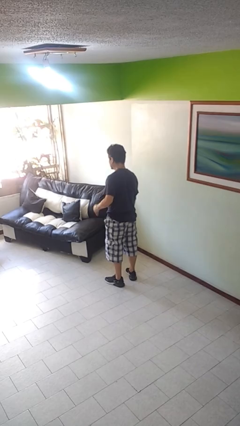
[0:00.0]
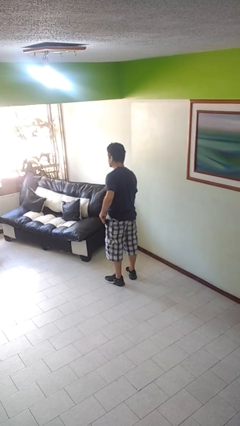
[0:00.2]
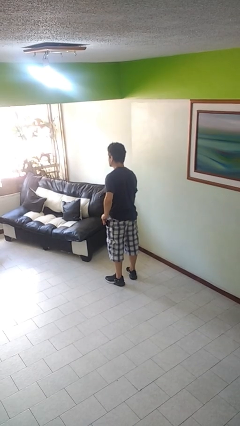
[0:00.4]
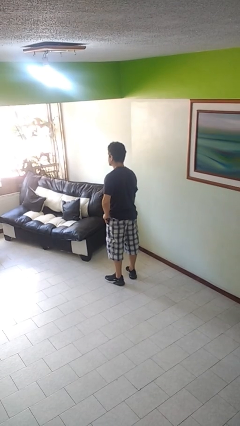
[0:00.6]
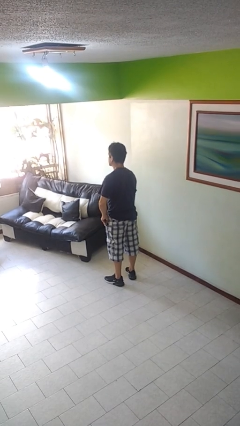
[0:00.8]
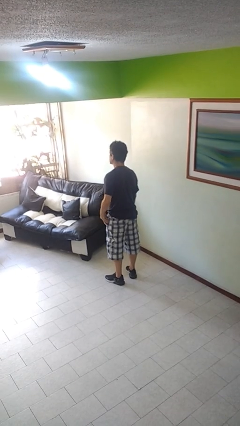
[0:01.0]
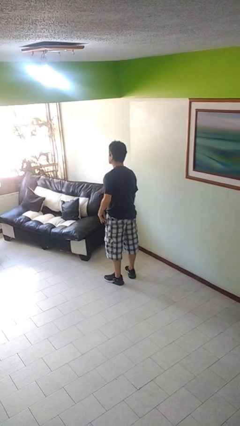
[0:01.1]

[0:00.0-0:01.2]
person puts phone into pocket

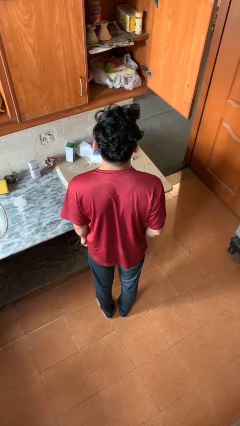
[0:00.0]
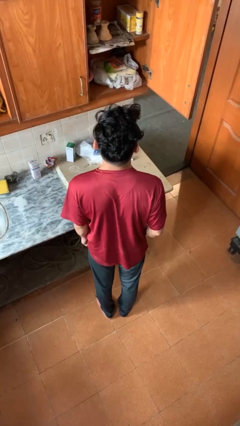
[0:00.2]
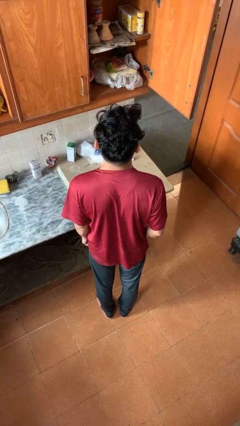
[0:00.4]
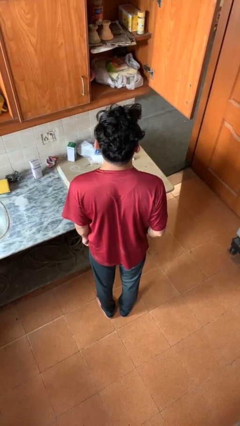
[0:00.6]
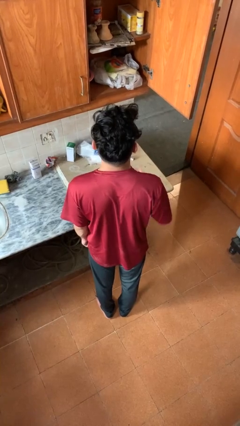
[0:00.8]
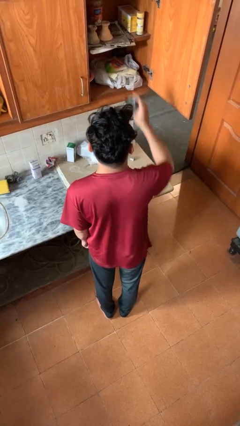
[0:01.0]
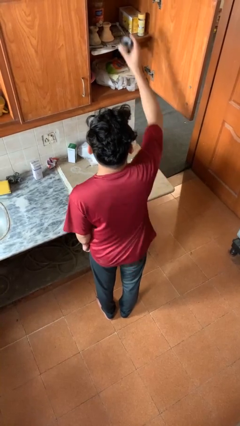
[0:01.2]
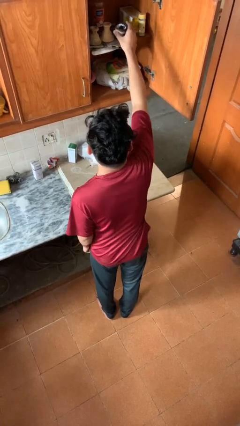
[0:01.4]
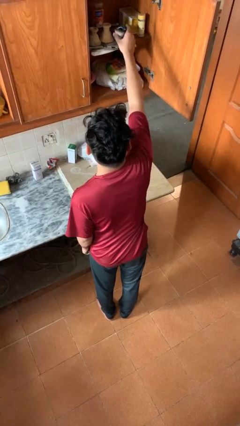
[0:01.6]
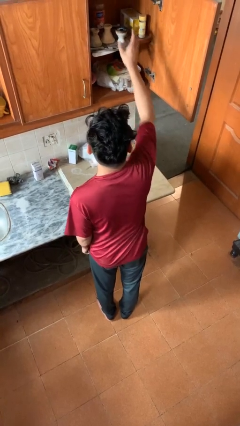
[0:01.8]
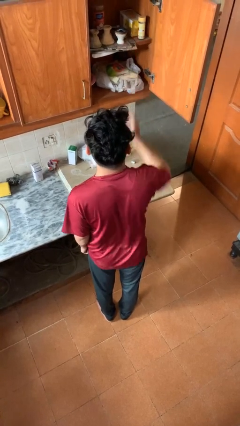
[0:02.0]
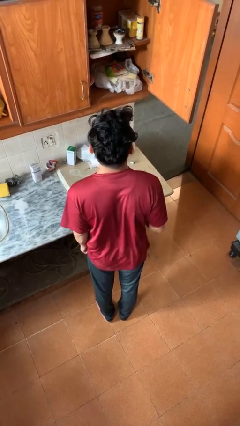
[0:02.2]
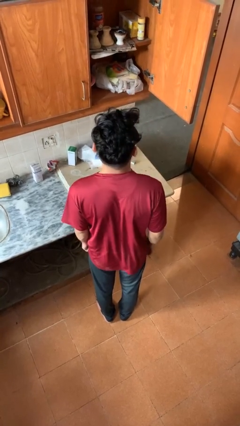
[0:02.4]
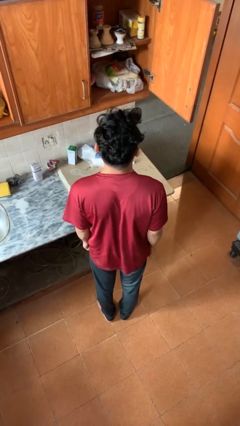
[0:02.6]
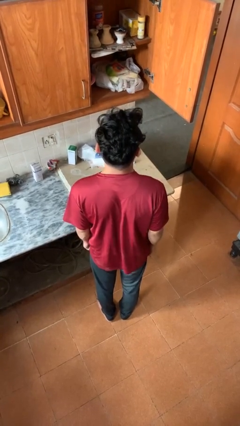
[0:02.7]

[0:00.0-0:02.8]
person puts object in cabinet

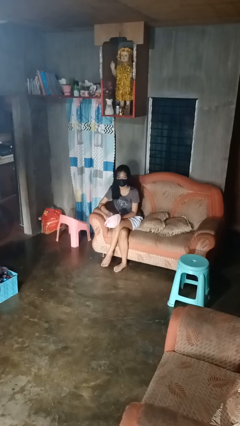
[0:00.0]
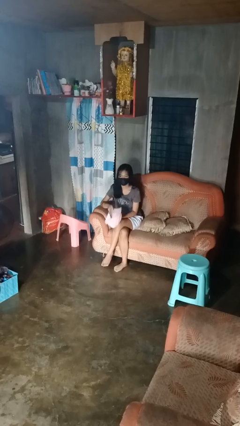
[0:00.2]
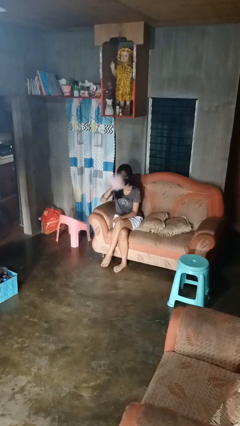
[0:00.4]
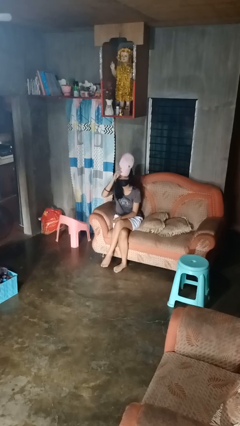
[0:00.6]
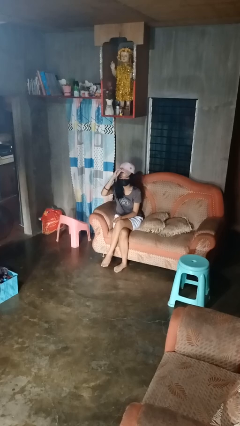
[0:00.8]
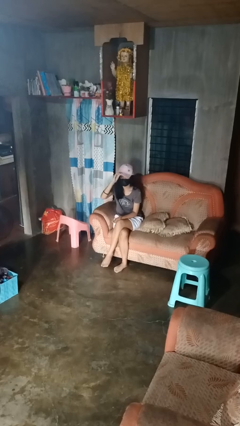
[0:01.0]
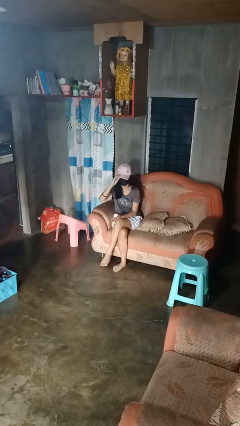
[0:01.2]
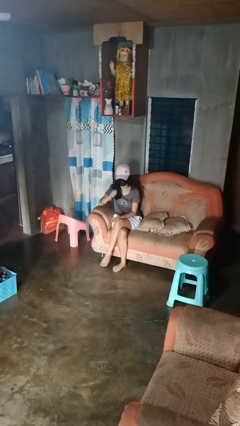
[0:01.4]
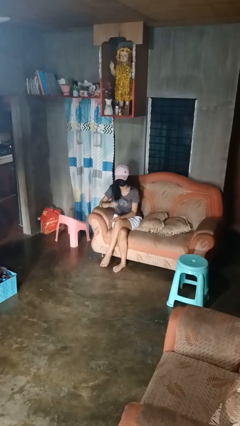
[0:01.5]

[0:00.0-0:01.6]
person puts on hat

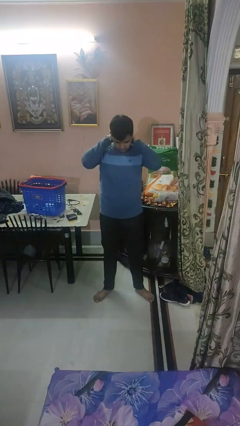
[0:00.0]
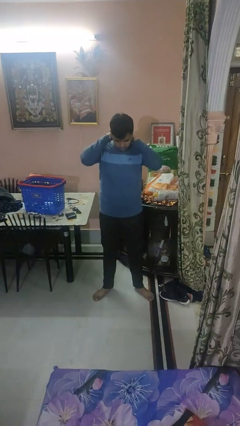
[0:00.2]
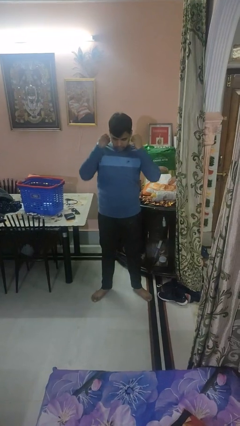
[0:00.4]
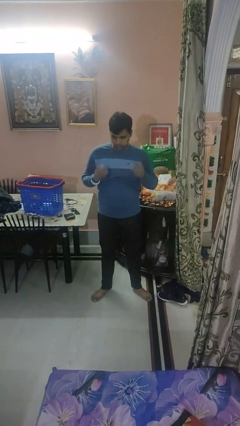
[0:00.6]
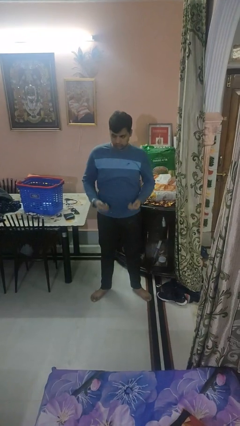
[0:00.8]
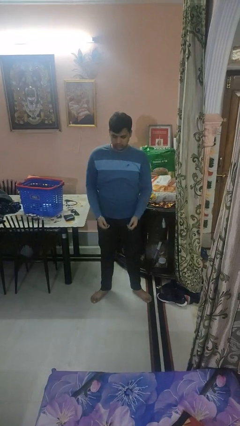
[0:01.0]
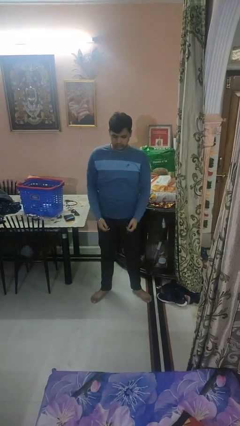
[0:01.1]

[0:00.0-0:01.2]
person takes off necklace

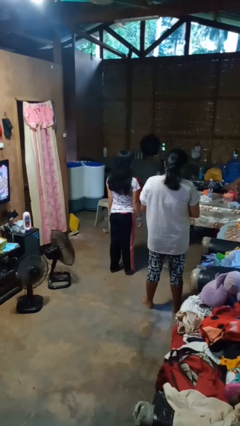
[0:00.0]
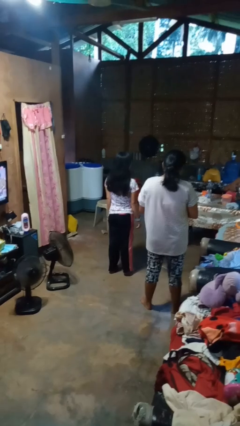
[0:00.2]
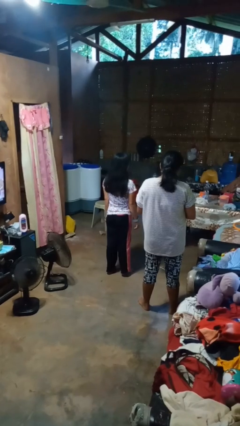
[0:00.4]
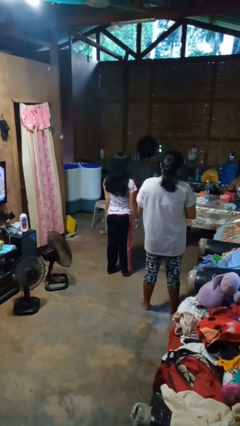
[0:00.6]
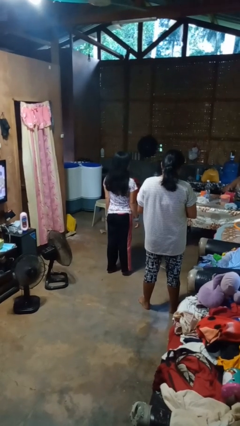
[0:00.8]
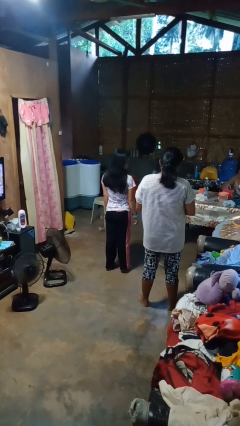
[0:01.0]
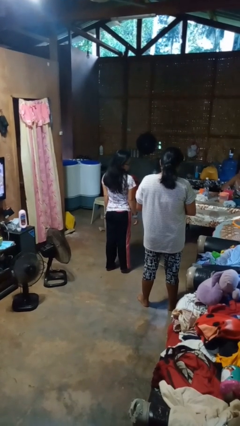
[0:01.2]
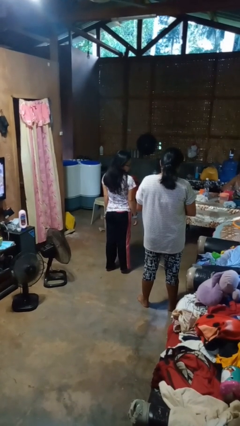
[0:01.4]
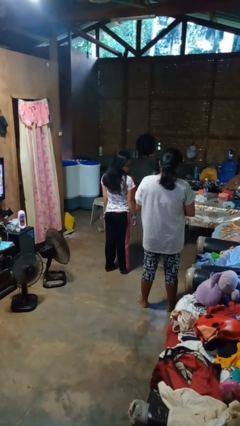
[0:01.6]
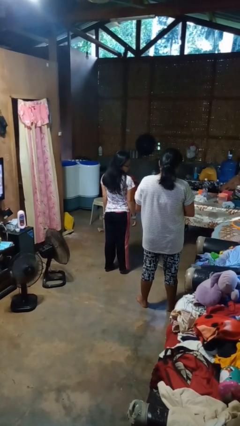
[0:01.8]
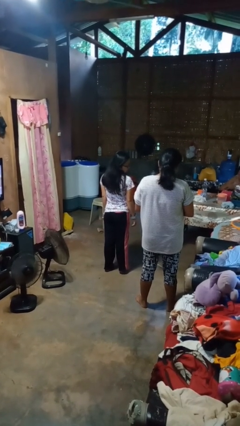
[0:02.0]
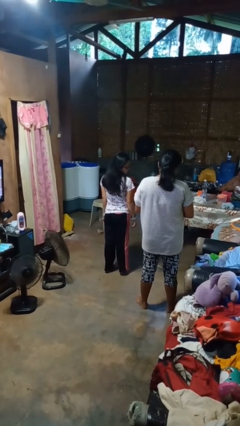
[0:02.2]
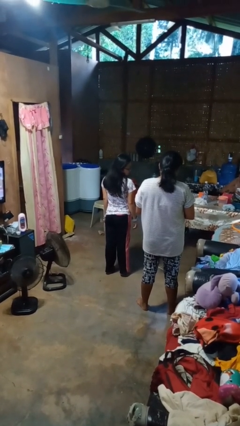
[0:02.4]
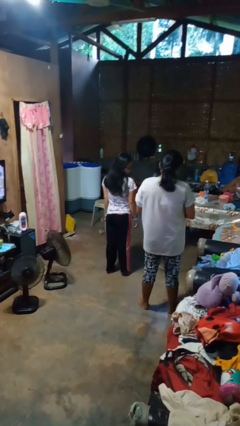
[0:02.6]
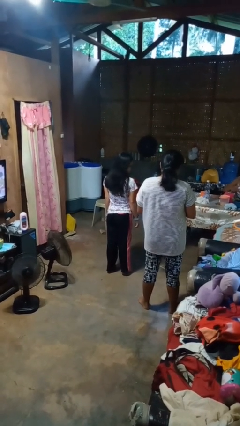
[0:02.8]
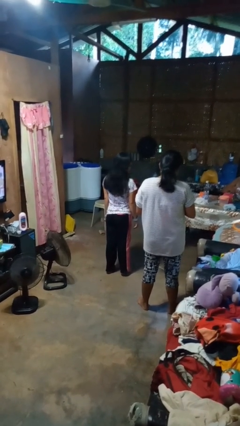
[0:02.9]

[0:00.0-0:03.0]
person looks over shoulder

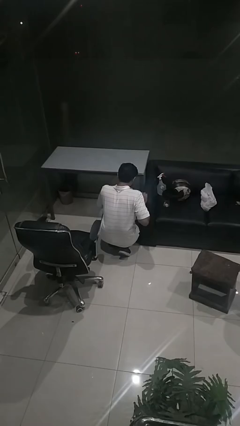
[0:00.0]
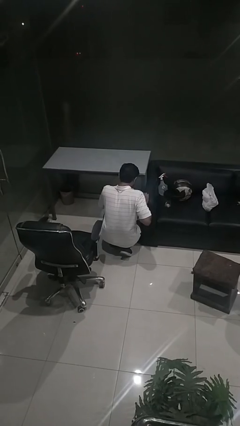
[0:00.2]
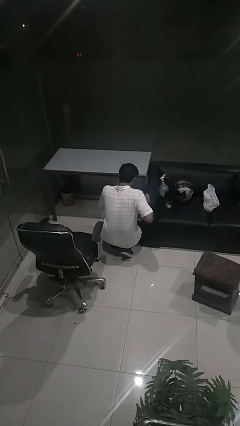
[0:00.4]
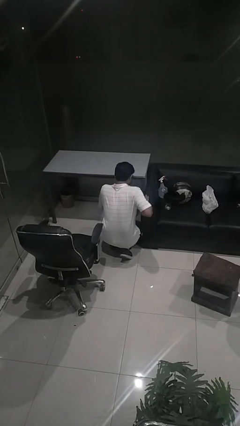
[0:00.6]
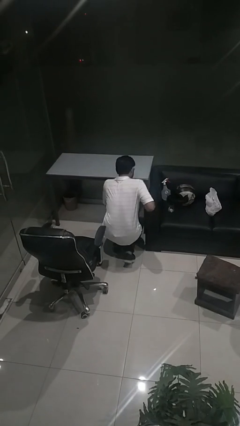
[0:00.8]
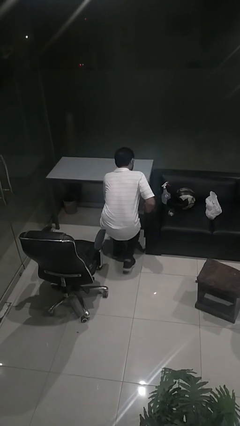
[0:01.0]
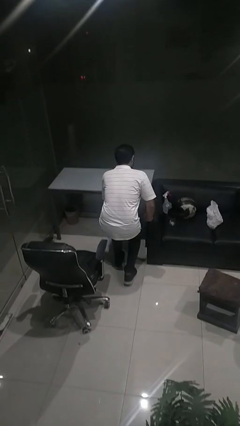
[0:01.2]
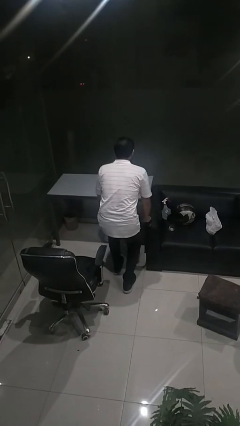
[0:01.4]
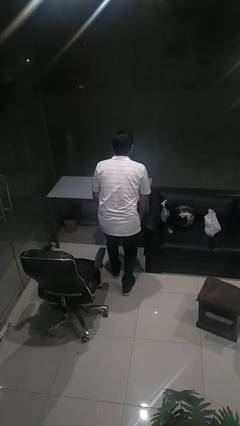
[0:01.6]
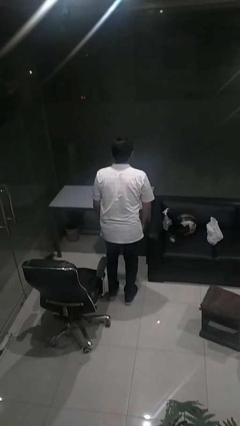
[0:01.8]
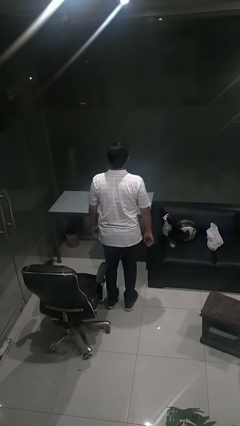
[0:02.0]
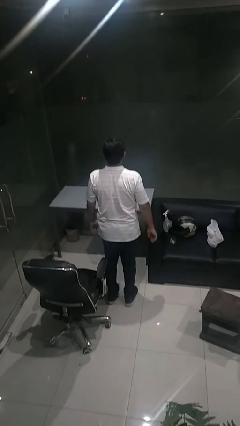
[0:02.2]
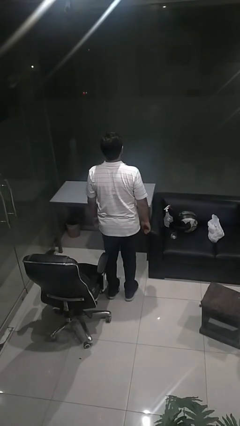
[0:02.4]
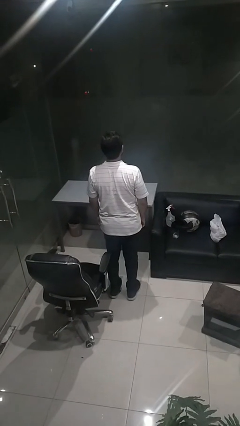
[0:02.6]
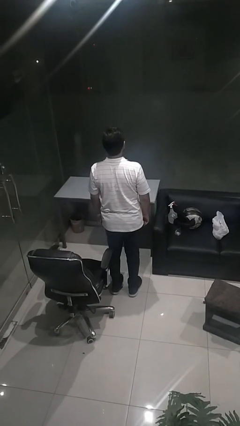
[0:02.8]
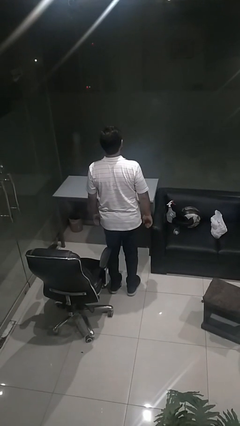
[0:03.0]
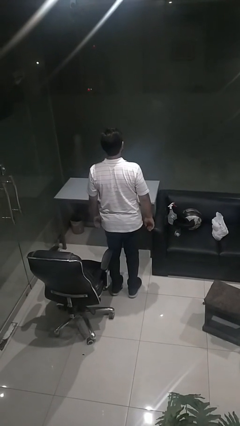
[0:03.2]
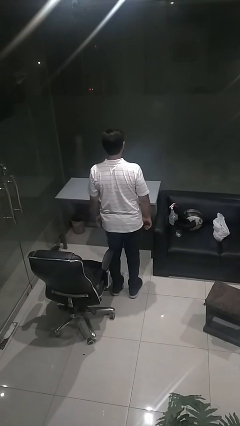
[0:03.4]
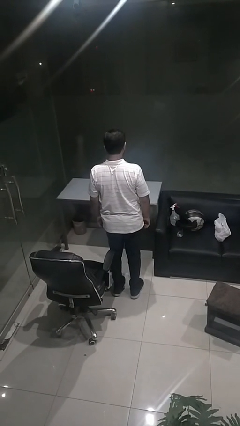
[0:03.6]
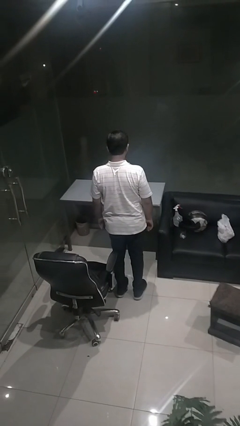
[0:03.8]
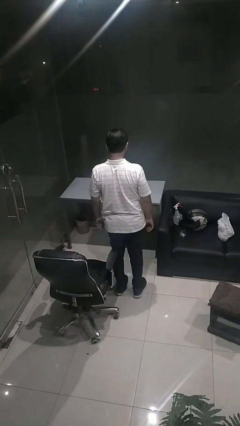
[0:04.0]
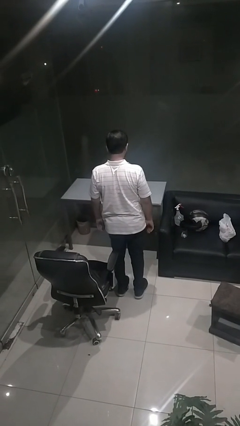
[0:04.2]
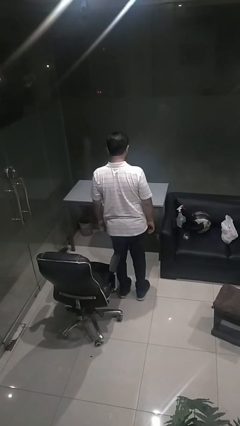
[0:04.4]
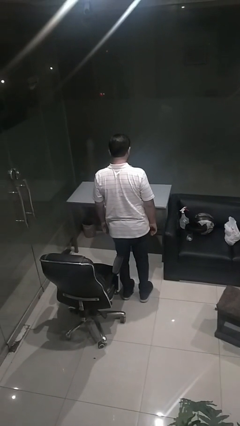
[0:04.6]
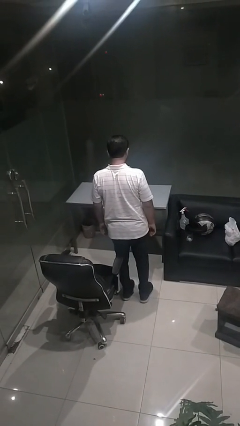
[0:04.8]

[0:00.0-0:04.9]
person stands up from floor

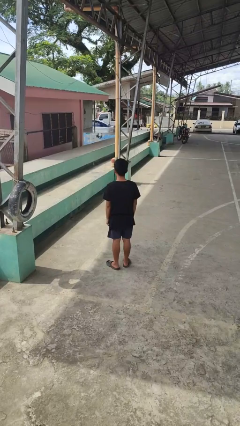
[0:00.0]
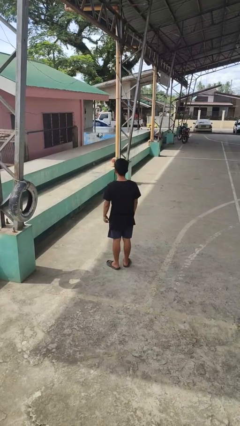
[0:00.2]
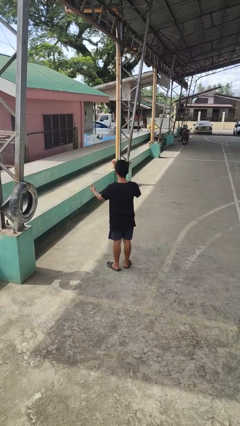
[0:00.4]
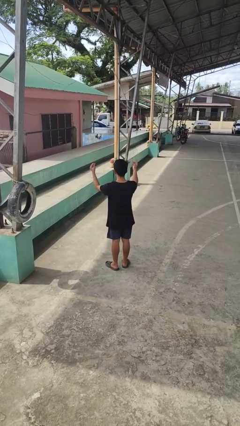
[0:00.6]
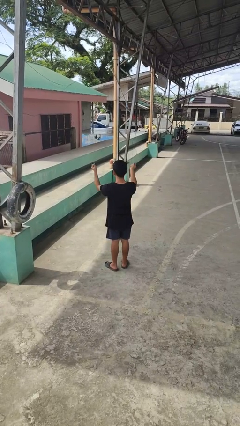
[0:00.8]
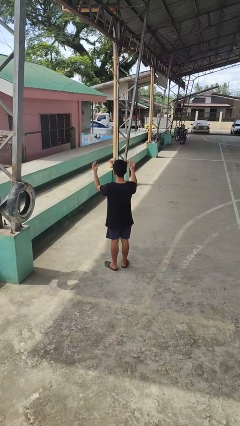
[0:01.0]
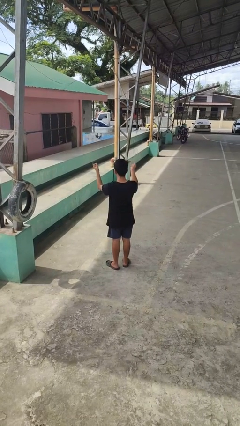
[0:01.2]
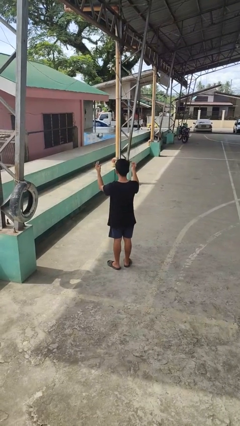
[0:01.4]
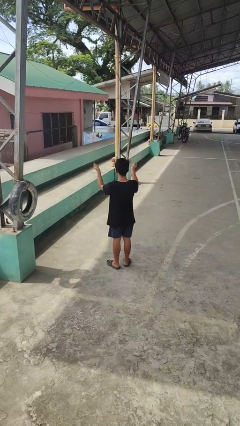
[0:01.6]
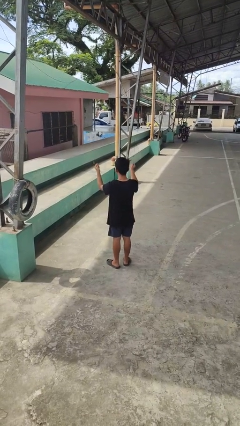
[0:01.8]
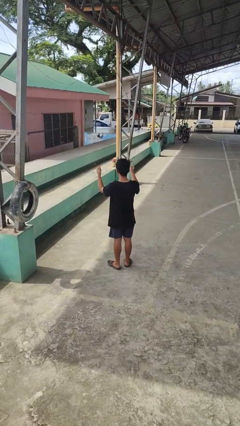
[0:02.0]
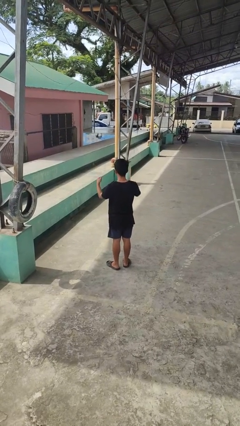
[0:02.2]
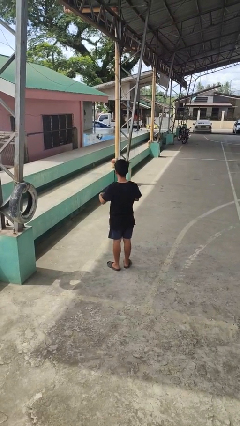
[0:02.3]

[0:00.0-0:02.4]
person snaps fingers
